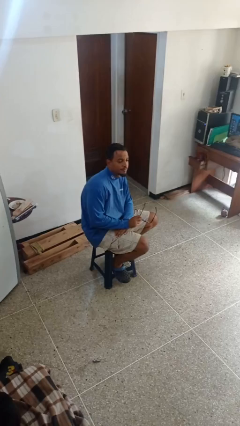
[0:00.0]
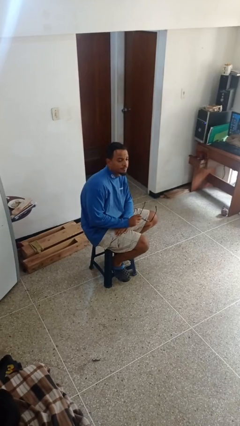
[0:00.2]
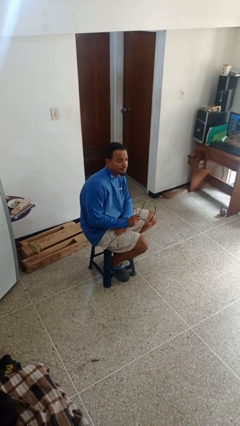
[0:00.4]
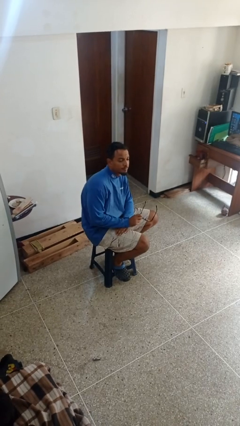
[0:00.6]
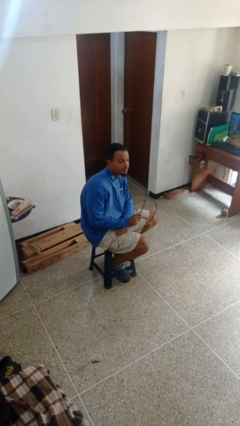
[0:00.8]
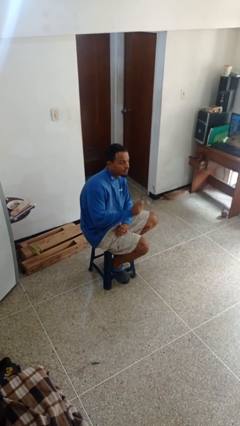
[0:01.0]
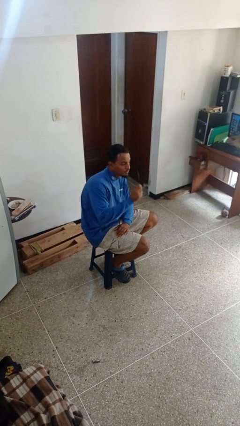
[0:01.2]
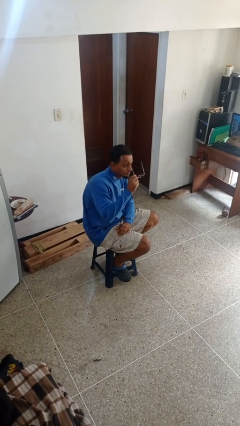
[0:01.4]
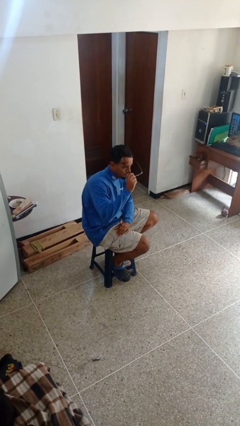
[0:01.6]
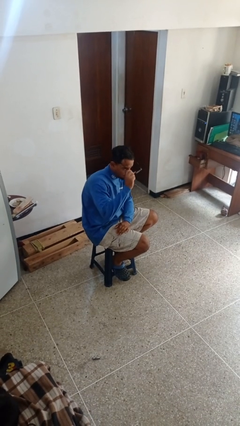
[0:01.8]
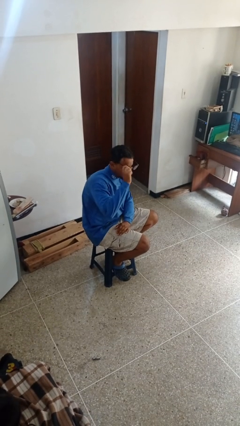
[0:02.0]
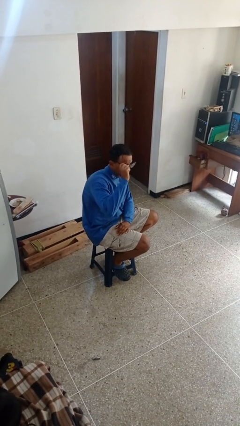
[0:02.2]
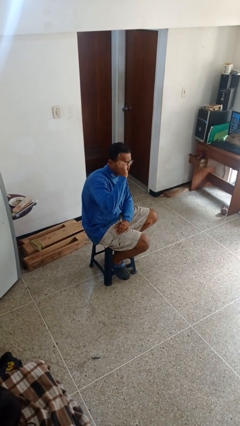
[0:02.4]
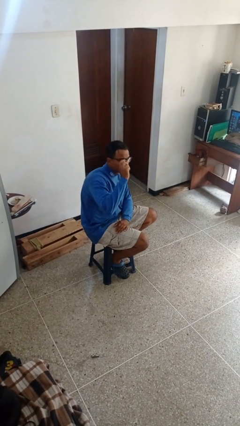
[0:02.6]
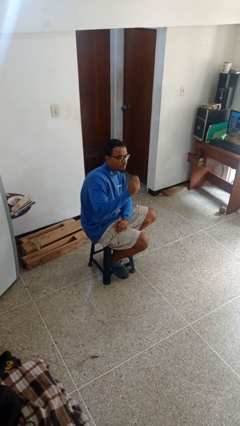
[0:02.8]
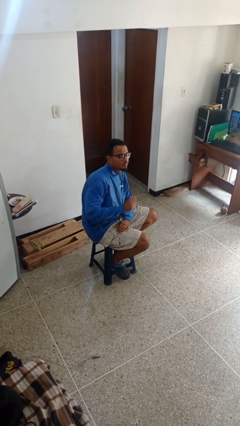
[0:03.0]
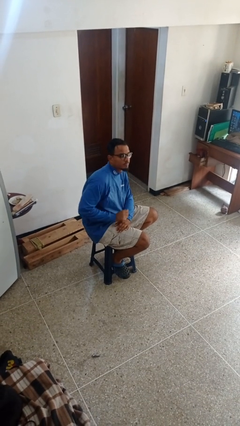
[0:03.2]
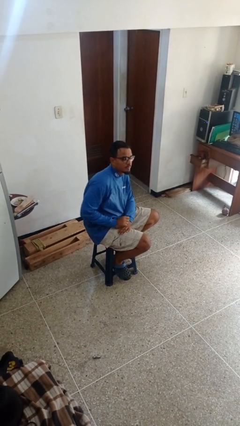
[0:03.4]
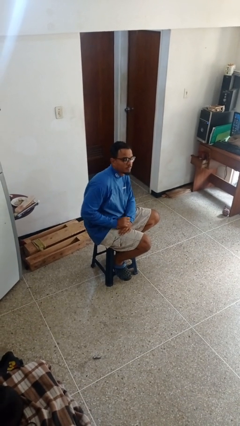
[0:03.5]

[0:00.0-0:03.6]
person puts on glasses

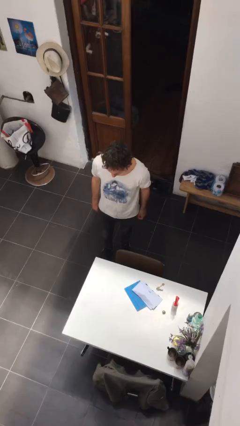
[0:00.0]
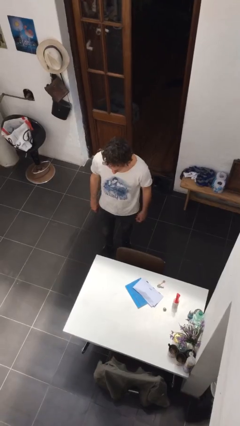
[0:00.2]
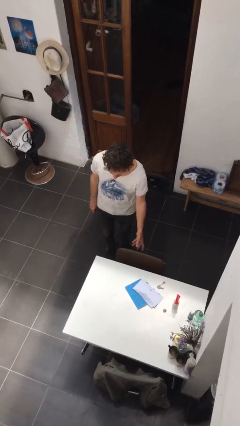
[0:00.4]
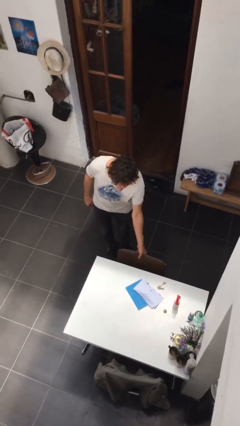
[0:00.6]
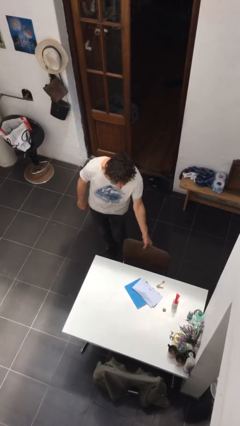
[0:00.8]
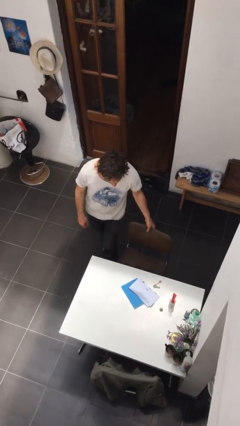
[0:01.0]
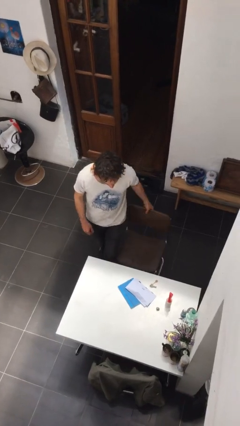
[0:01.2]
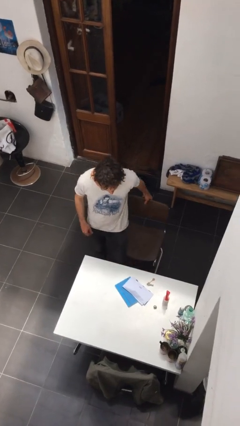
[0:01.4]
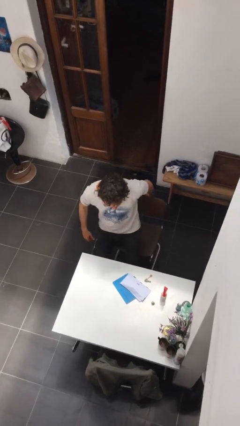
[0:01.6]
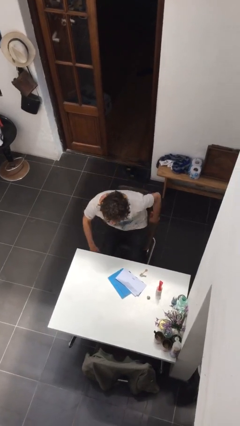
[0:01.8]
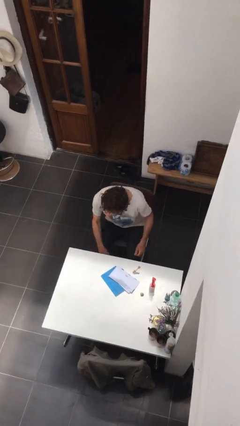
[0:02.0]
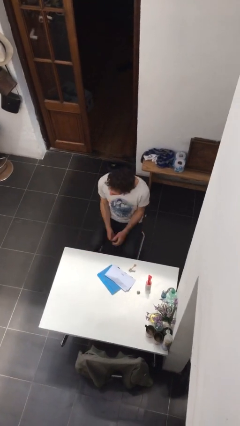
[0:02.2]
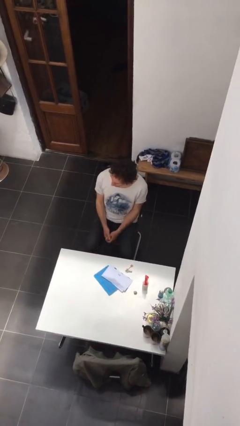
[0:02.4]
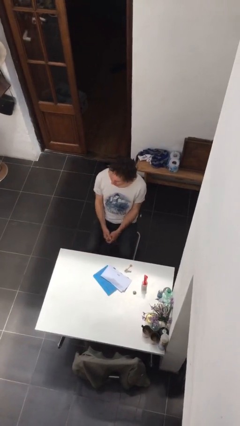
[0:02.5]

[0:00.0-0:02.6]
person sits down

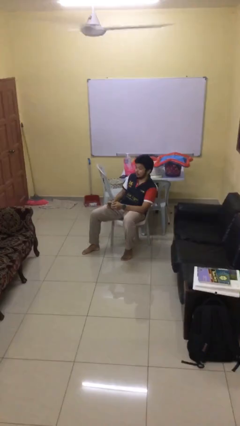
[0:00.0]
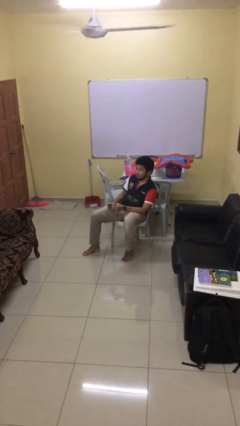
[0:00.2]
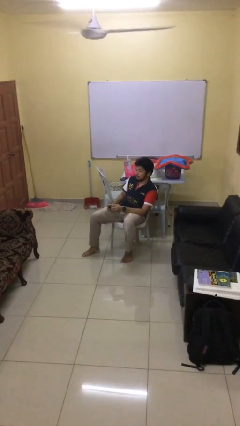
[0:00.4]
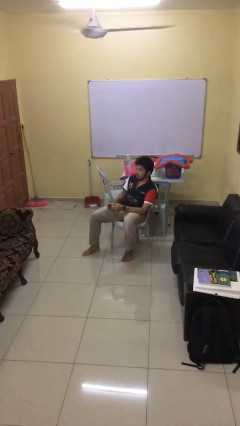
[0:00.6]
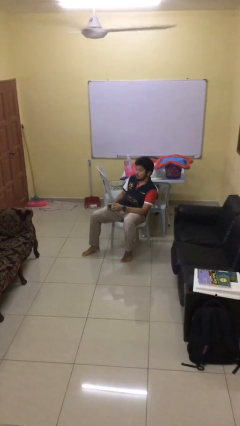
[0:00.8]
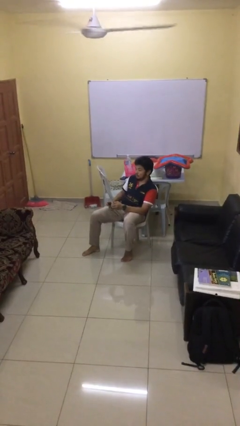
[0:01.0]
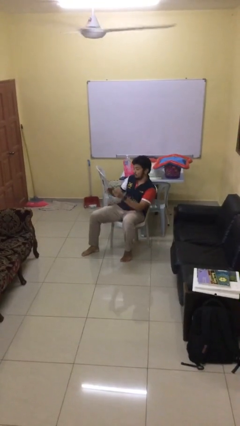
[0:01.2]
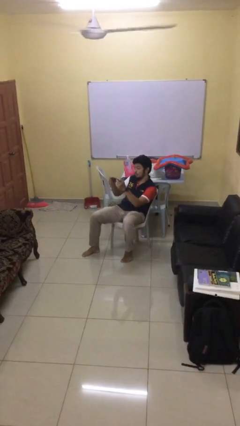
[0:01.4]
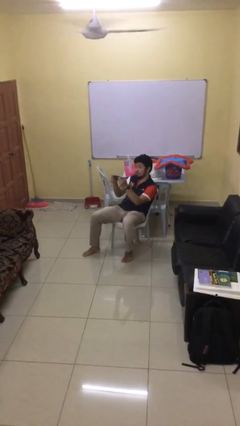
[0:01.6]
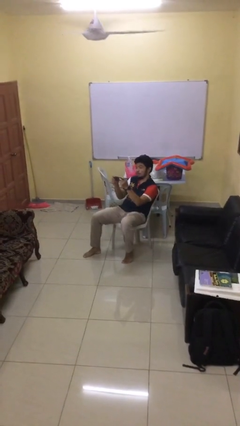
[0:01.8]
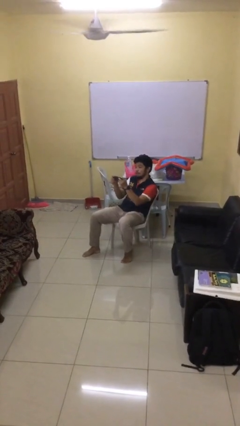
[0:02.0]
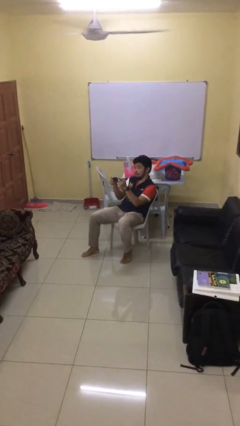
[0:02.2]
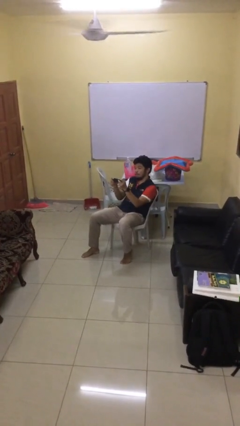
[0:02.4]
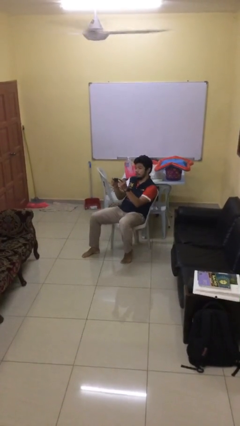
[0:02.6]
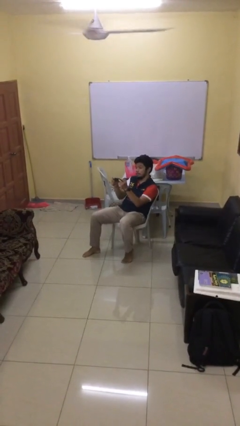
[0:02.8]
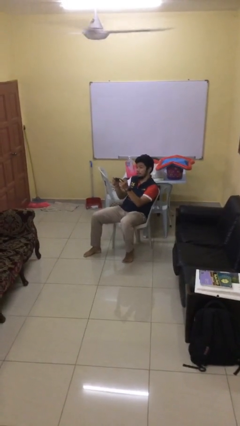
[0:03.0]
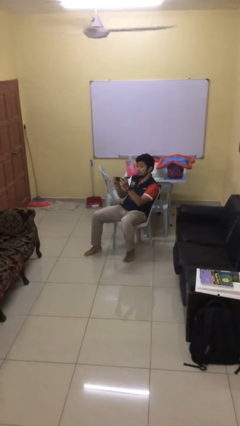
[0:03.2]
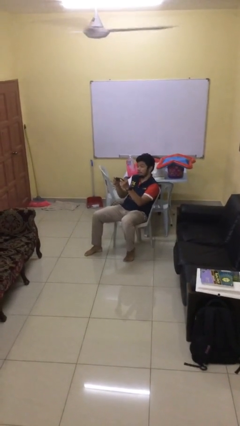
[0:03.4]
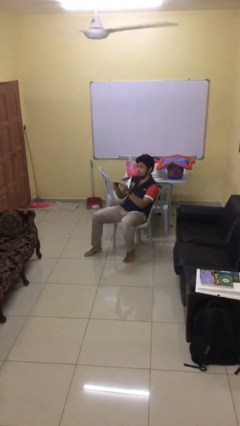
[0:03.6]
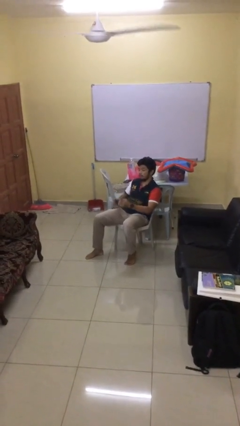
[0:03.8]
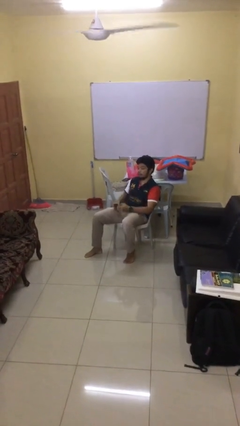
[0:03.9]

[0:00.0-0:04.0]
person interacts with handheld game

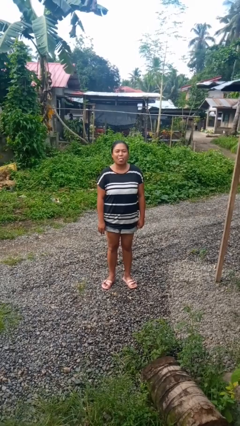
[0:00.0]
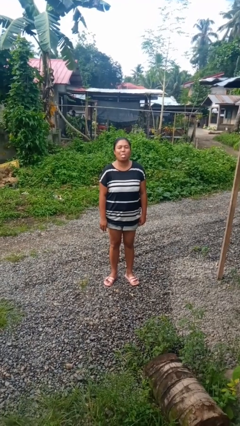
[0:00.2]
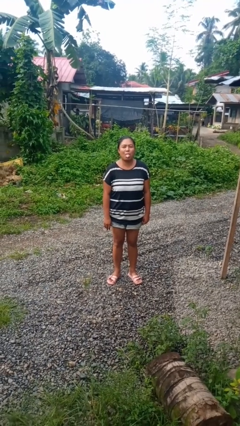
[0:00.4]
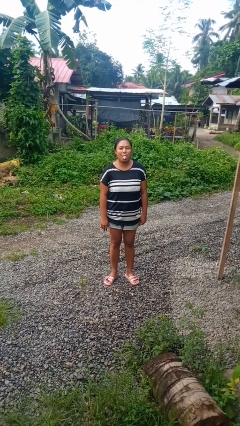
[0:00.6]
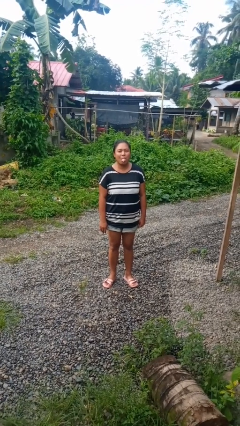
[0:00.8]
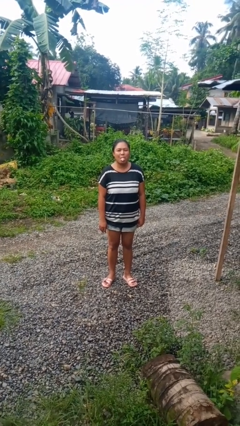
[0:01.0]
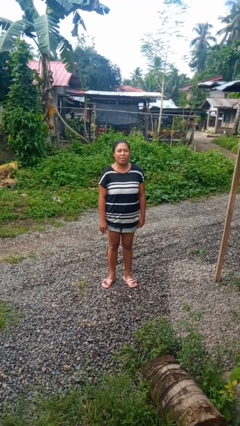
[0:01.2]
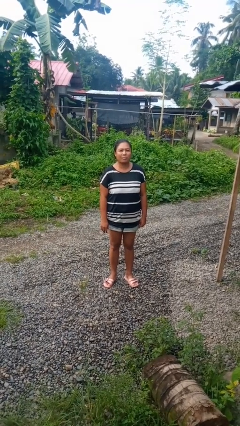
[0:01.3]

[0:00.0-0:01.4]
person sticks out tongue

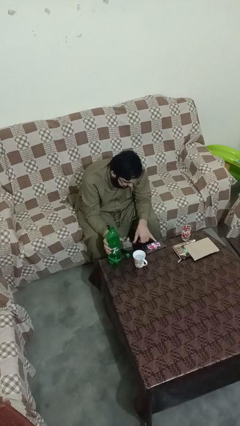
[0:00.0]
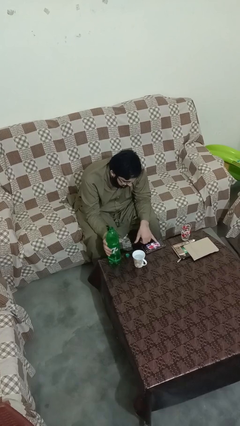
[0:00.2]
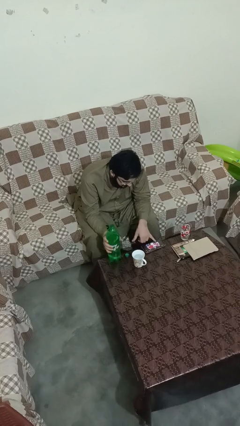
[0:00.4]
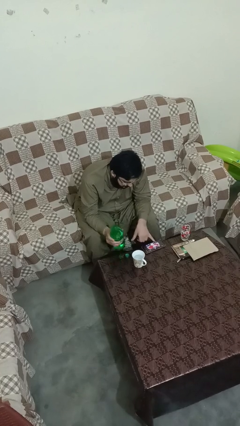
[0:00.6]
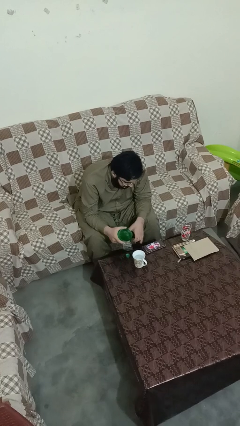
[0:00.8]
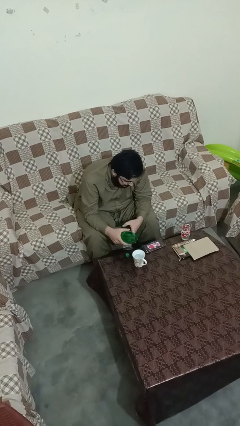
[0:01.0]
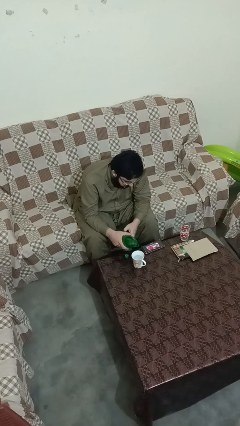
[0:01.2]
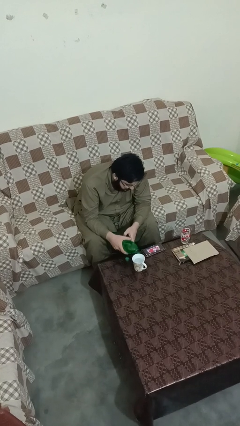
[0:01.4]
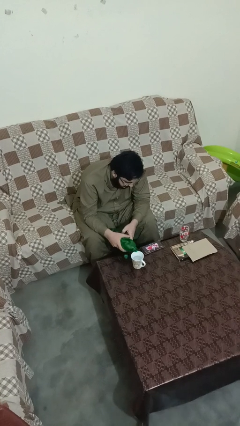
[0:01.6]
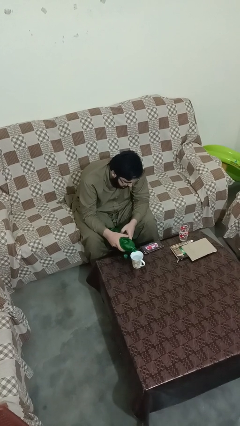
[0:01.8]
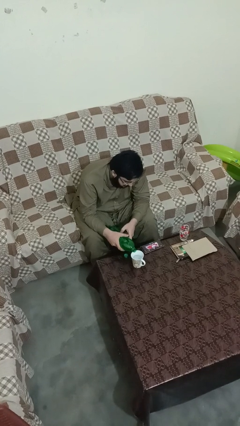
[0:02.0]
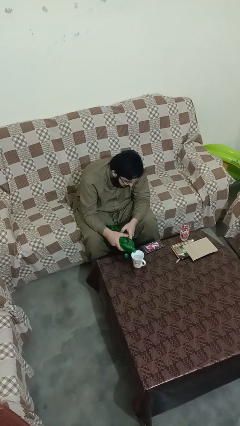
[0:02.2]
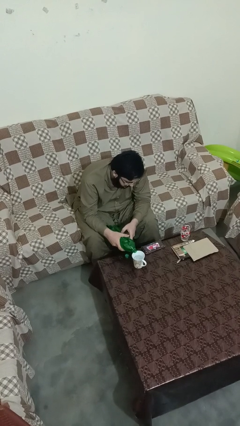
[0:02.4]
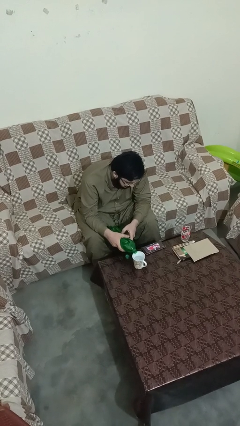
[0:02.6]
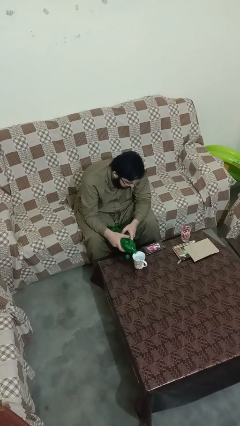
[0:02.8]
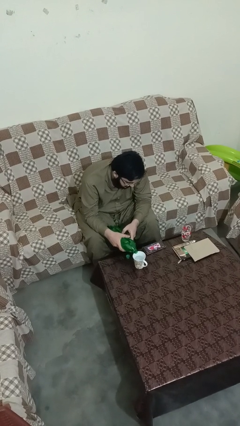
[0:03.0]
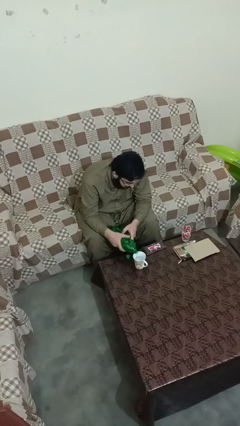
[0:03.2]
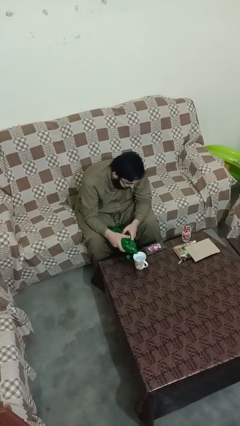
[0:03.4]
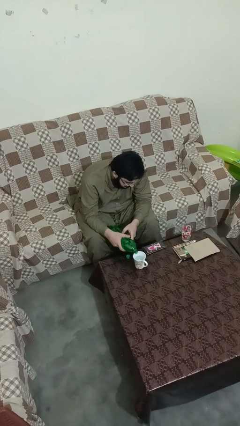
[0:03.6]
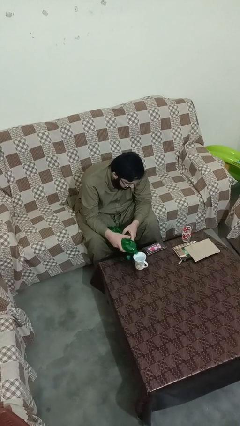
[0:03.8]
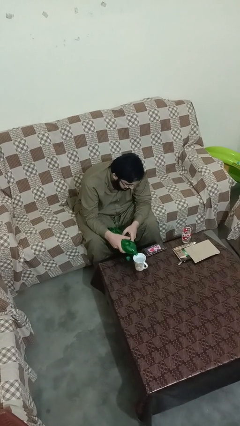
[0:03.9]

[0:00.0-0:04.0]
person pours liquid into cup

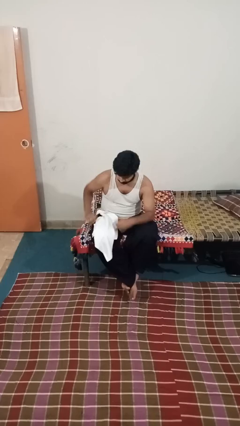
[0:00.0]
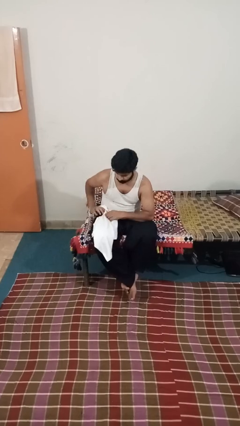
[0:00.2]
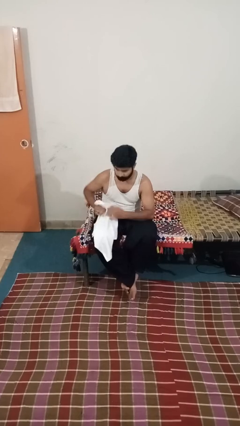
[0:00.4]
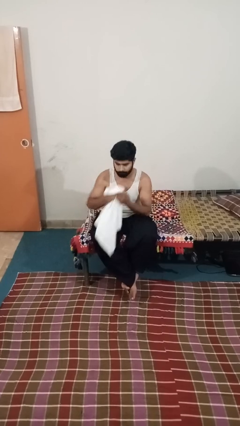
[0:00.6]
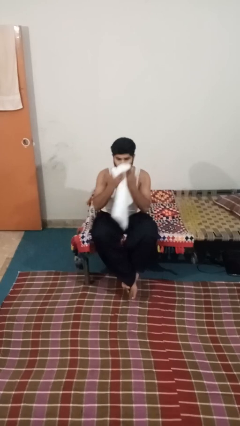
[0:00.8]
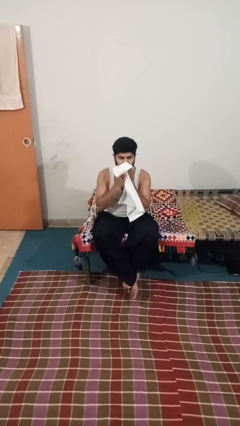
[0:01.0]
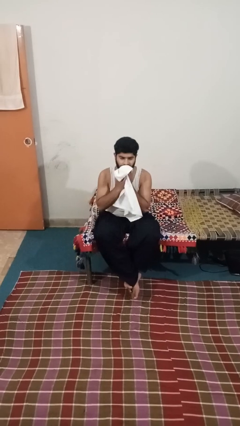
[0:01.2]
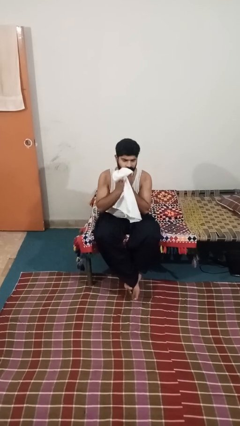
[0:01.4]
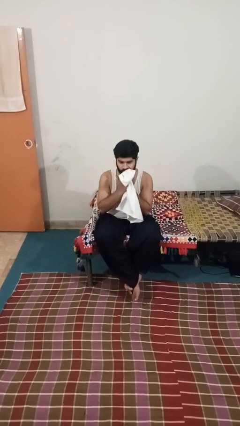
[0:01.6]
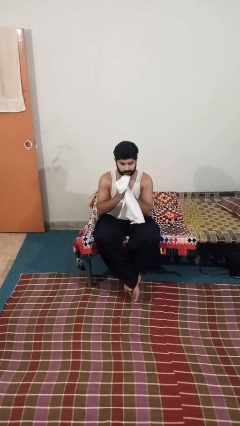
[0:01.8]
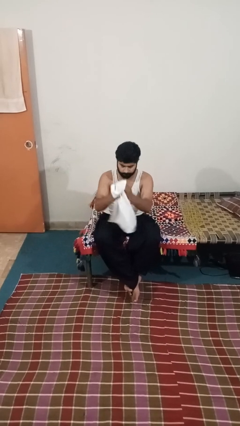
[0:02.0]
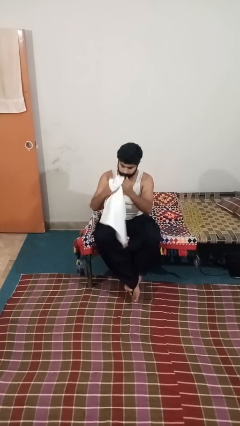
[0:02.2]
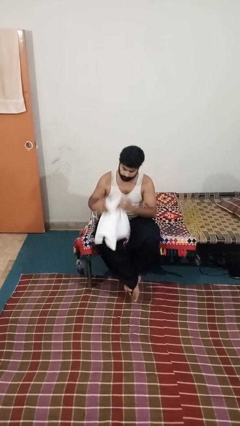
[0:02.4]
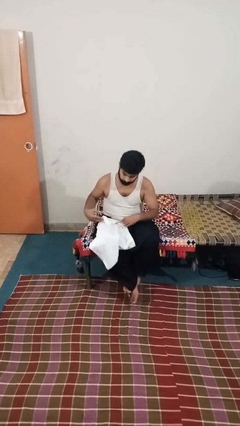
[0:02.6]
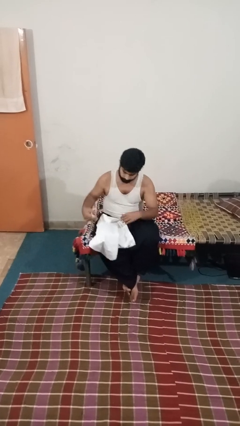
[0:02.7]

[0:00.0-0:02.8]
person wipes mouth with napkin
